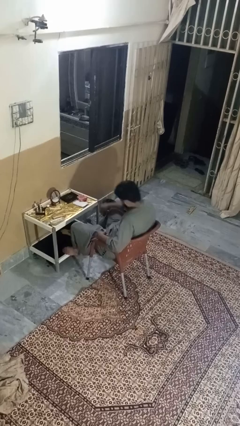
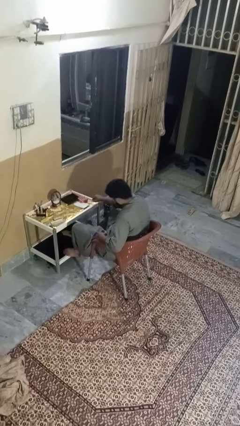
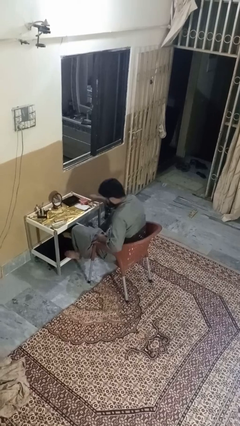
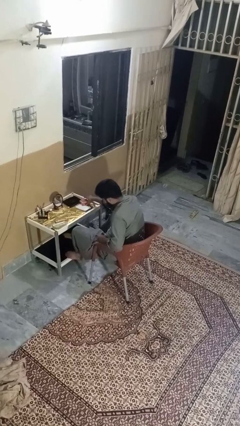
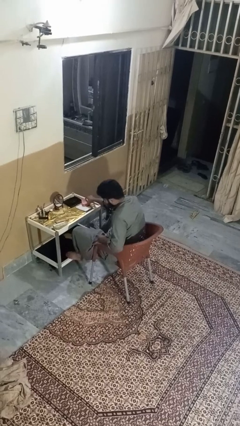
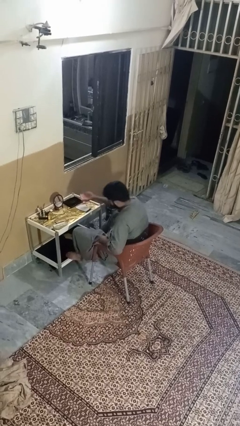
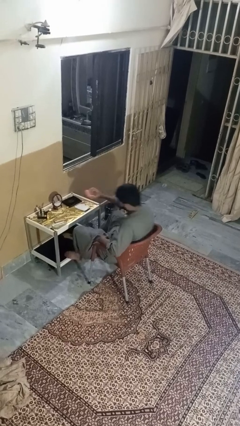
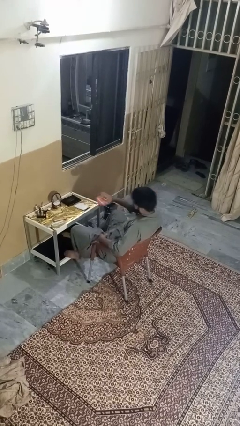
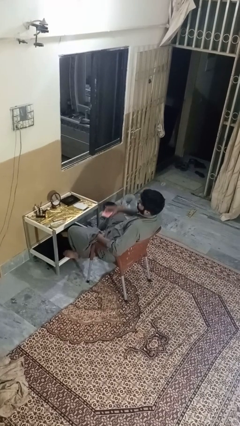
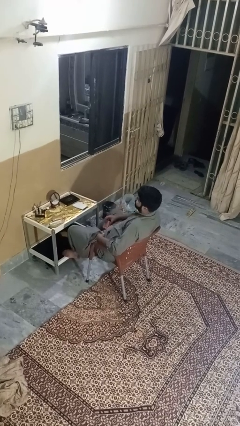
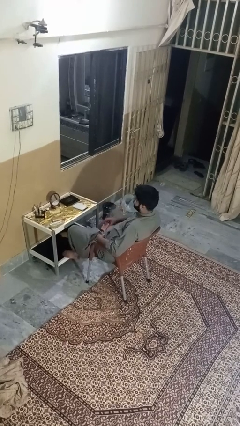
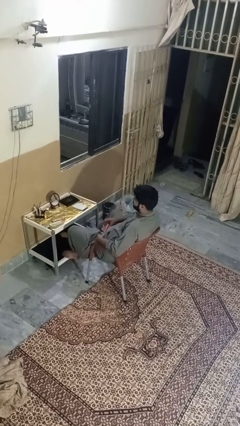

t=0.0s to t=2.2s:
person picks up object from table

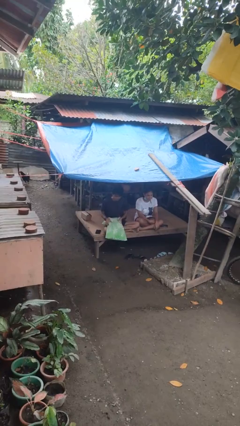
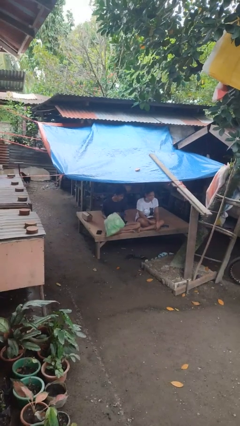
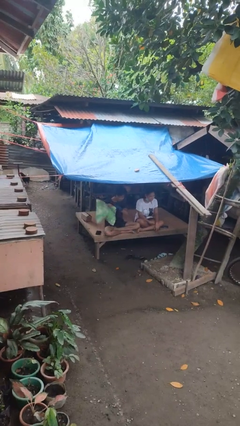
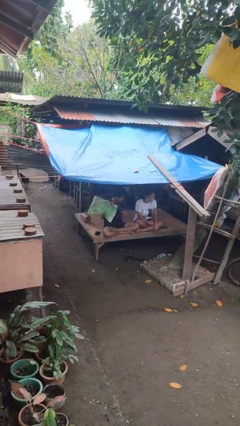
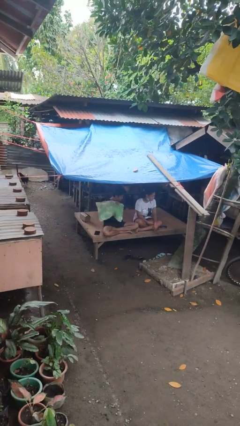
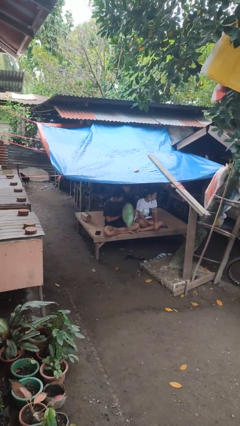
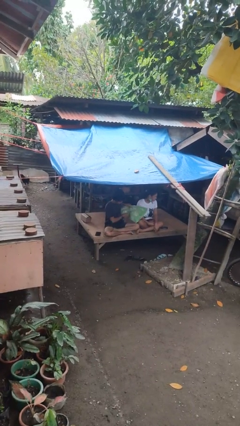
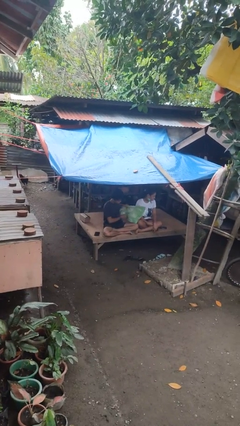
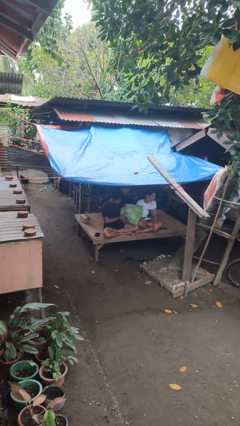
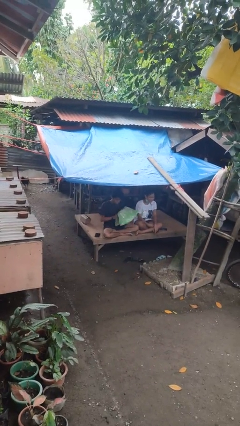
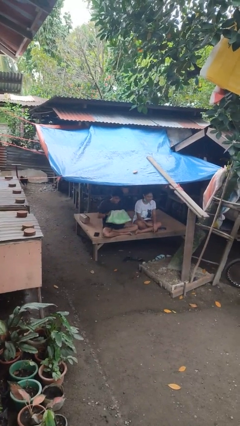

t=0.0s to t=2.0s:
person hits person with pillow

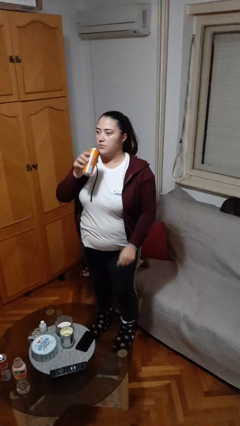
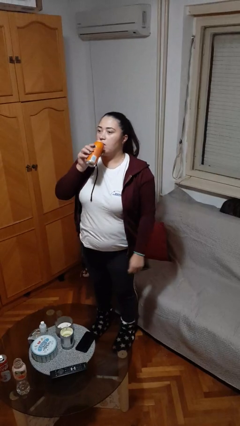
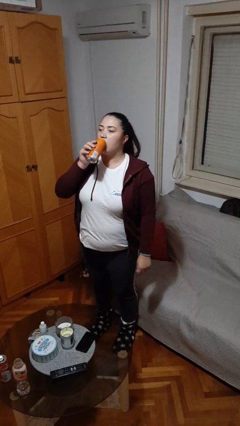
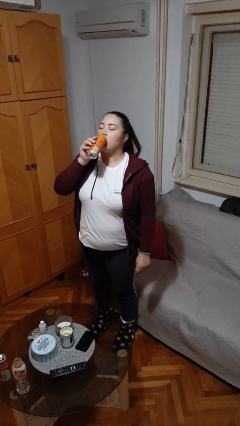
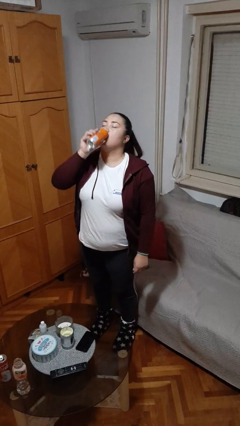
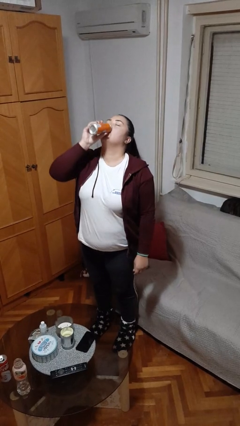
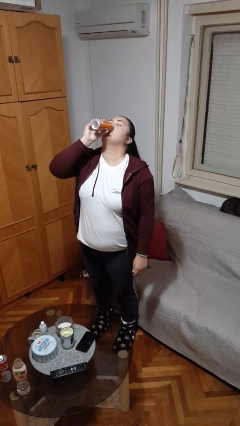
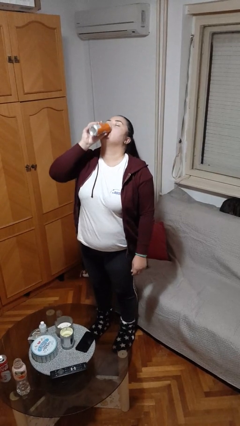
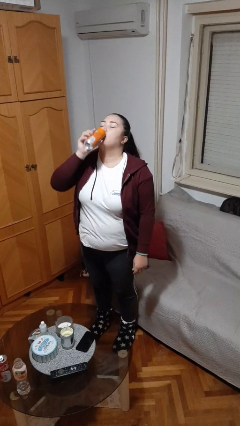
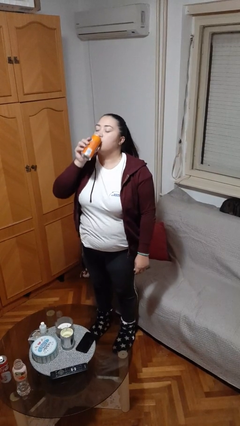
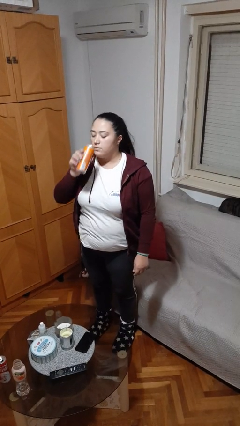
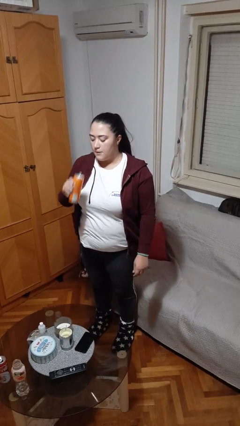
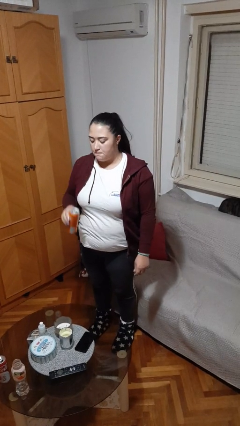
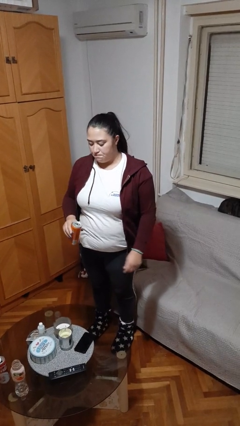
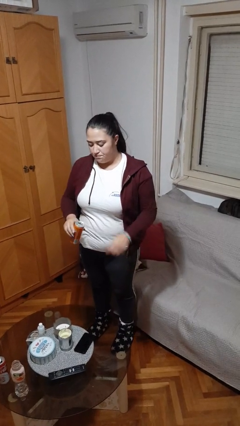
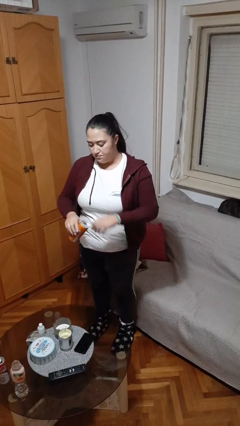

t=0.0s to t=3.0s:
person drinks from beverage can

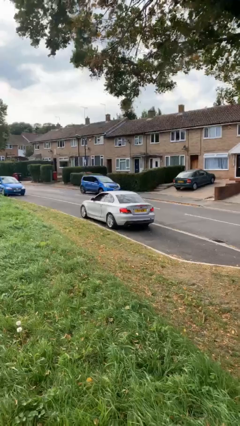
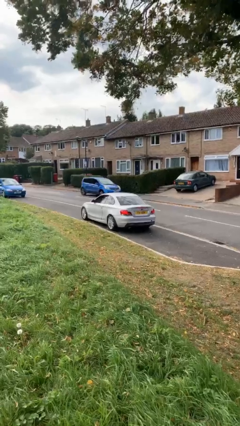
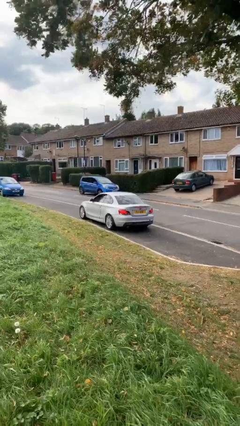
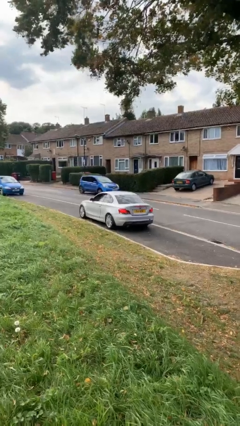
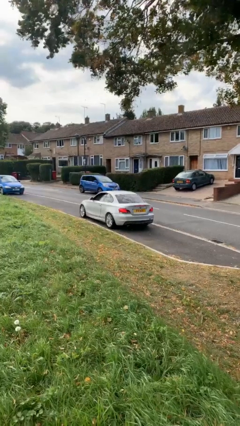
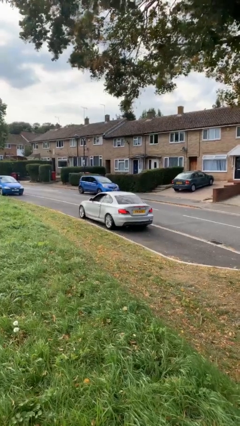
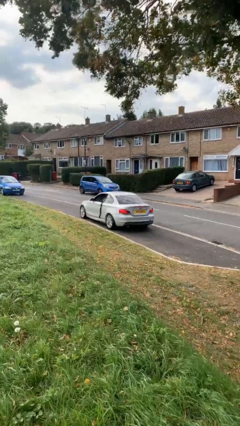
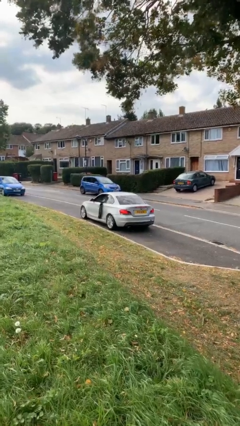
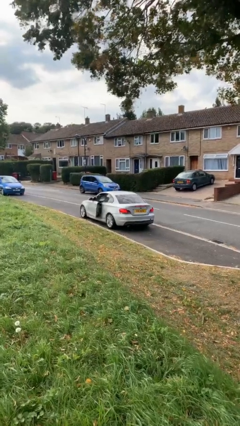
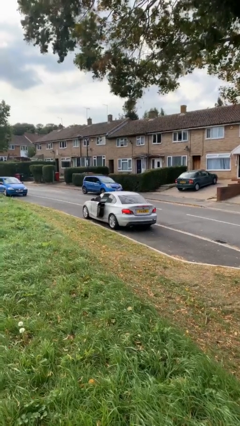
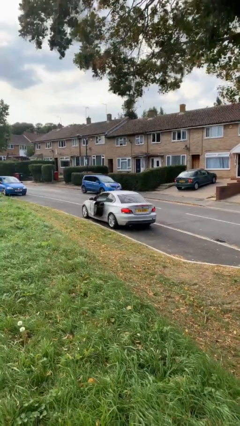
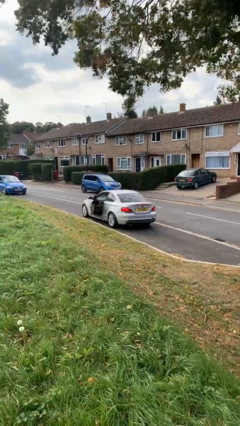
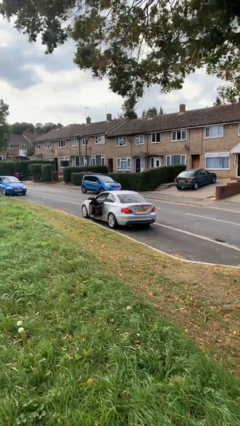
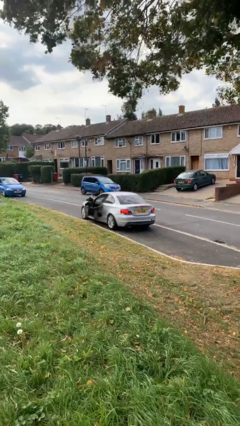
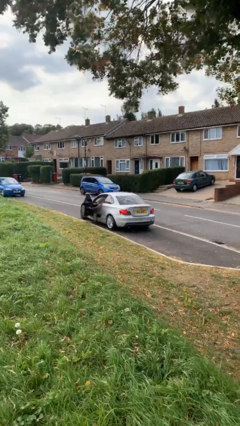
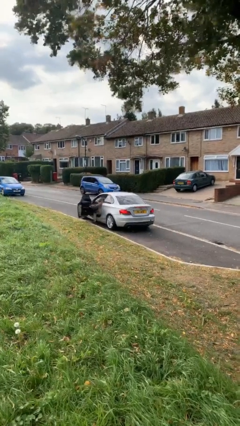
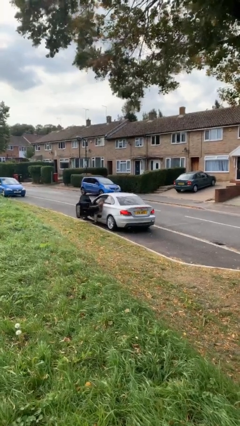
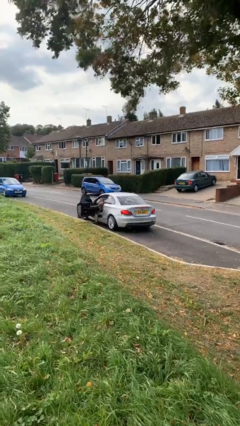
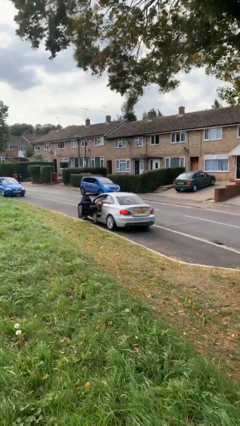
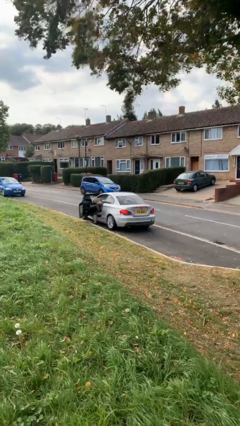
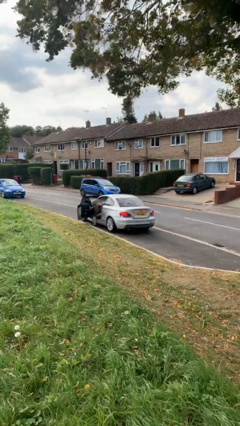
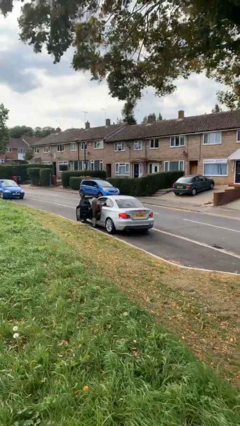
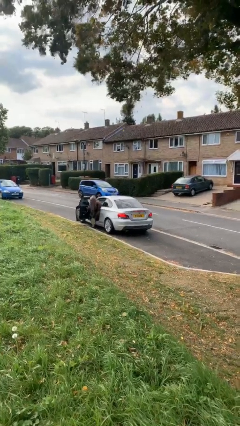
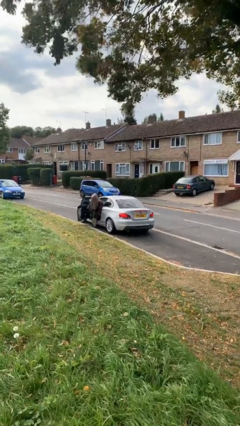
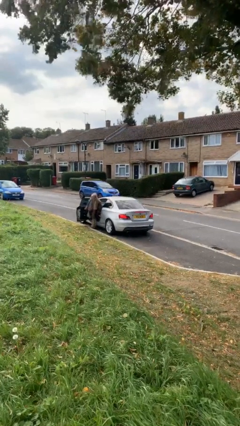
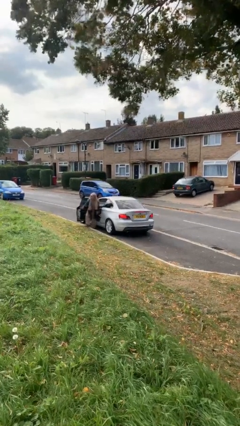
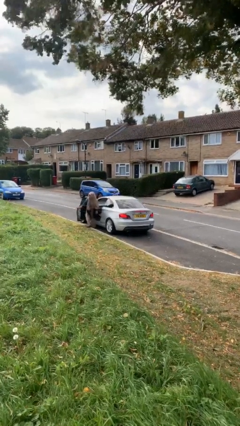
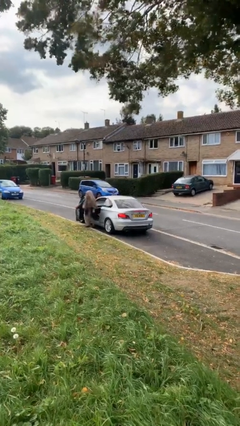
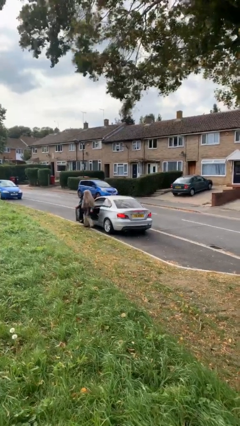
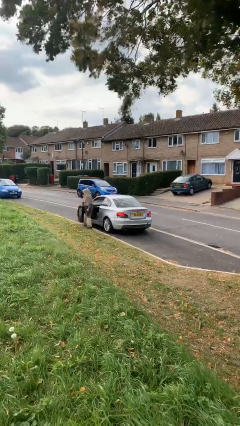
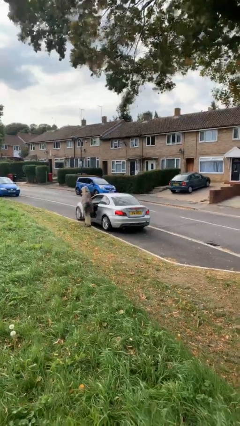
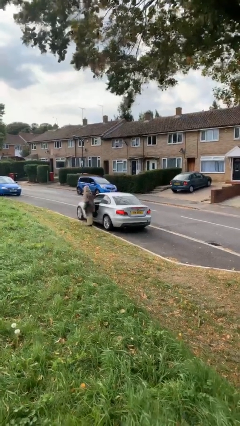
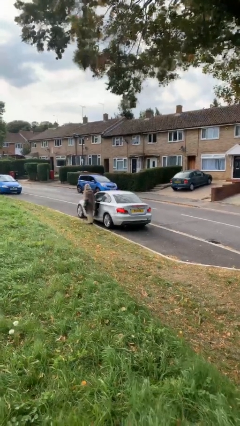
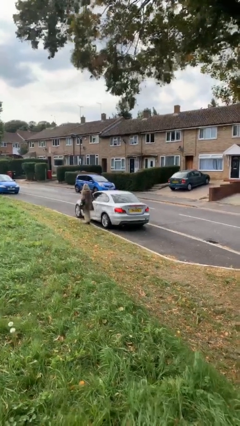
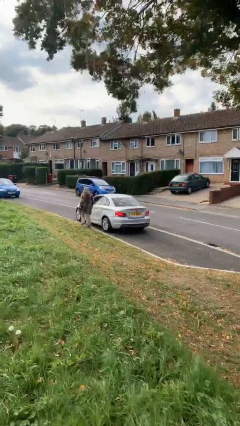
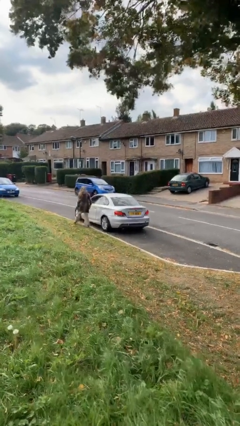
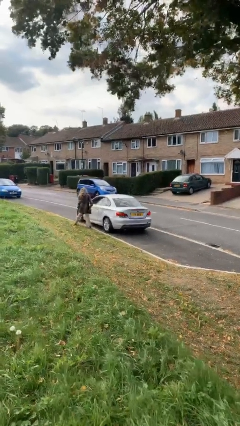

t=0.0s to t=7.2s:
car drops off person

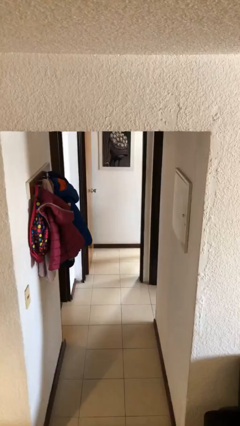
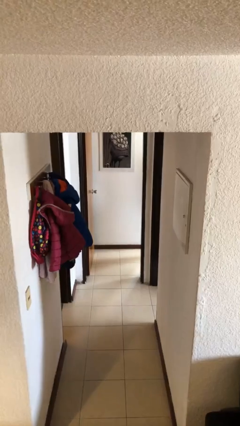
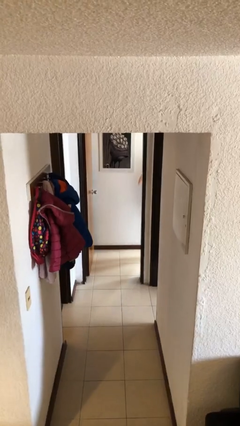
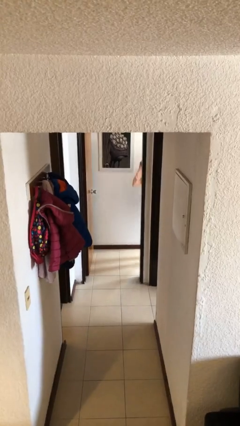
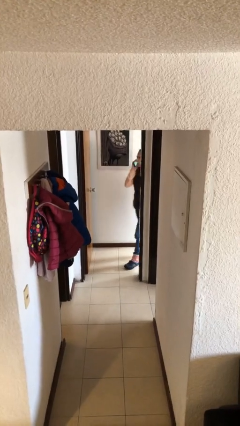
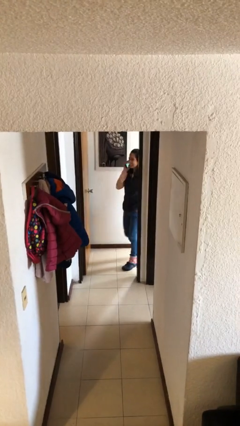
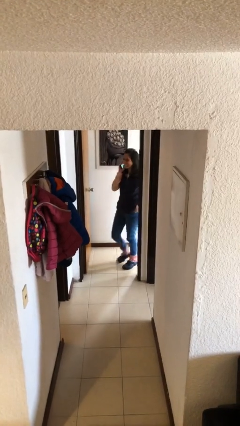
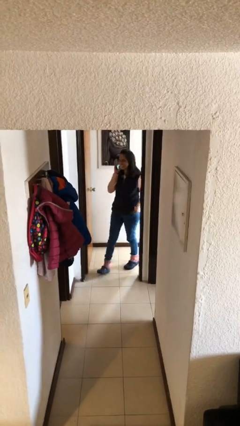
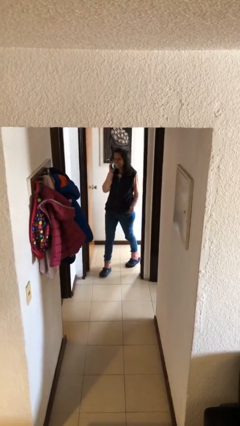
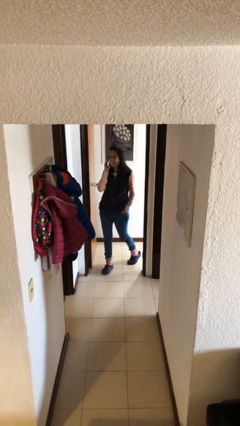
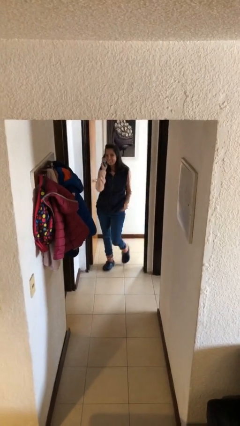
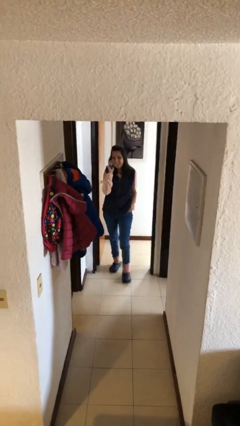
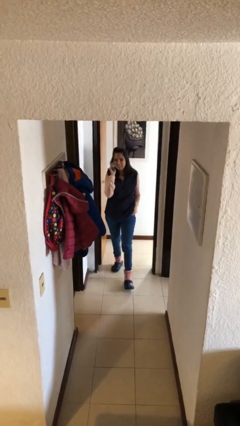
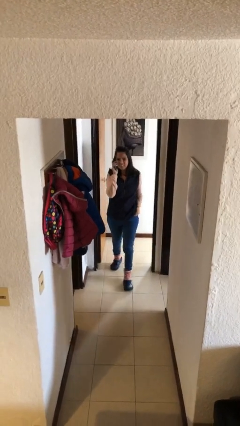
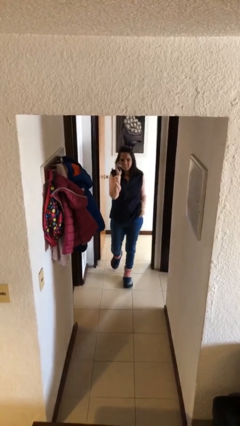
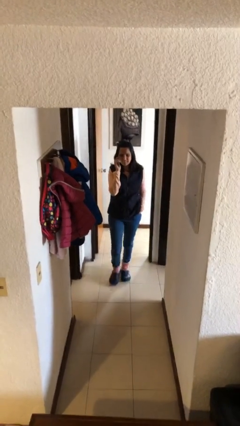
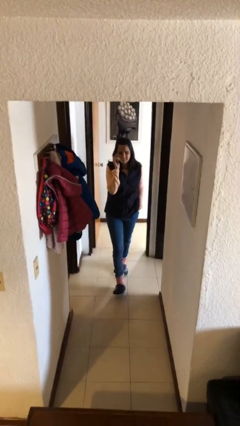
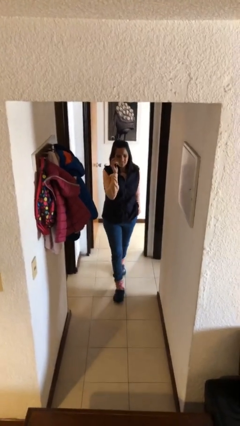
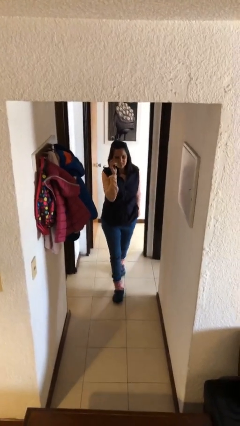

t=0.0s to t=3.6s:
person enters scene through structure
